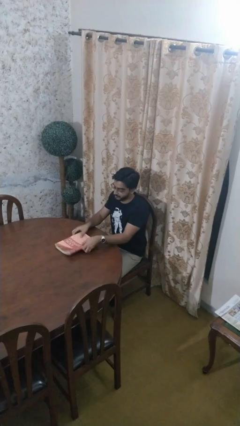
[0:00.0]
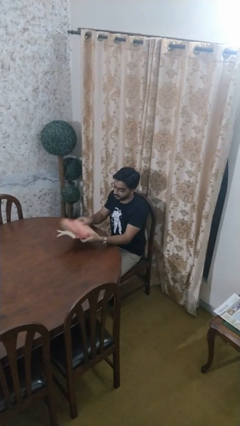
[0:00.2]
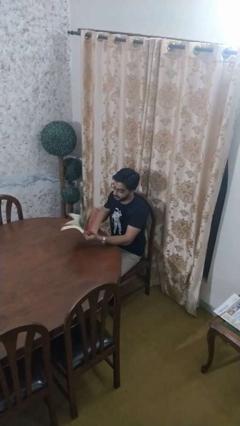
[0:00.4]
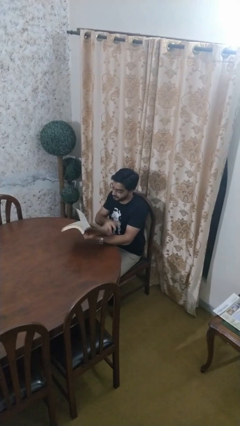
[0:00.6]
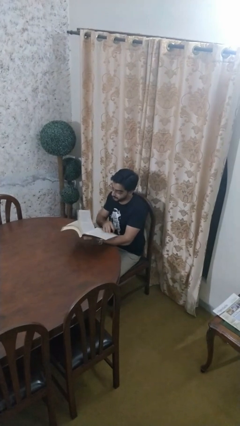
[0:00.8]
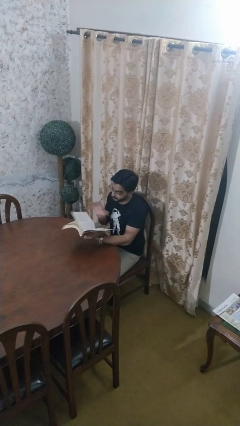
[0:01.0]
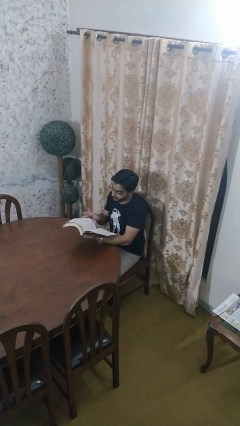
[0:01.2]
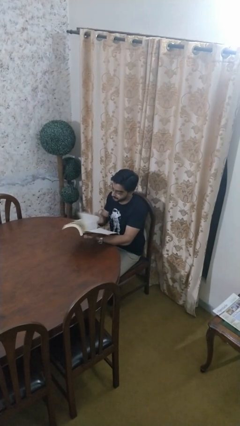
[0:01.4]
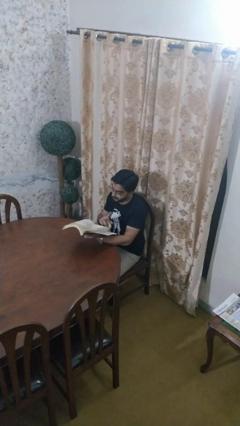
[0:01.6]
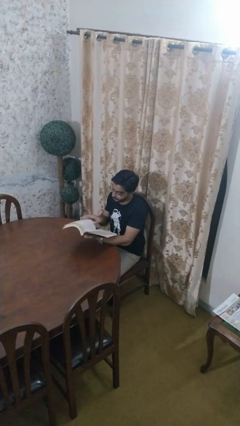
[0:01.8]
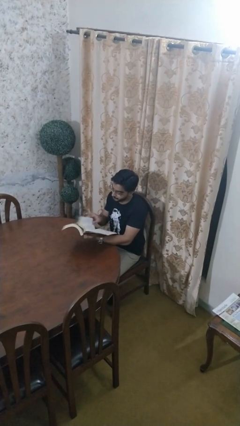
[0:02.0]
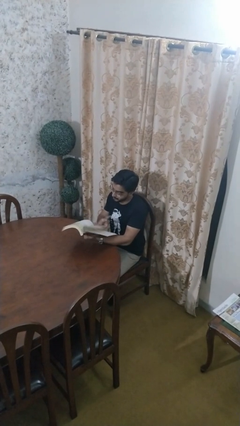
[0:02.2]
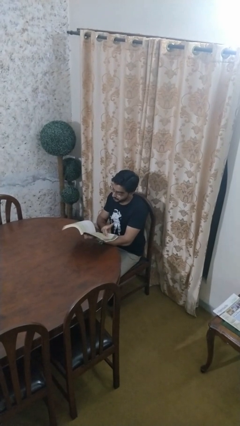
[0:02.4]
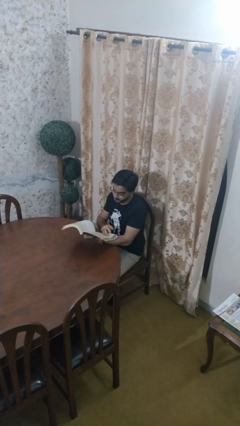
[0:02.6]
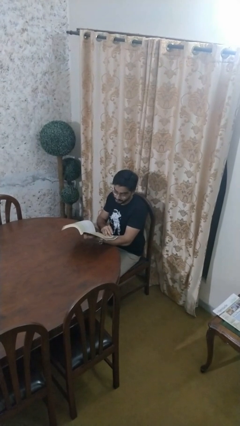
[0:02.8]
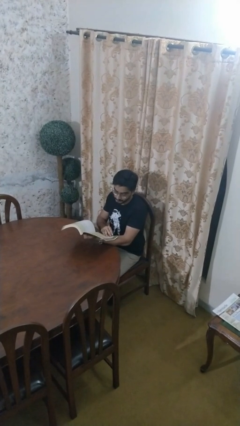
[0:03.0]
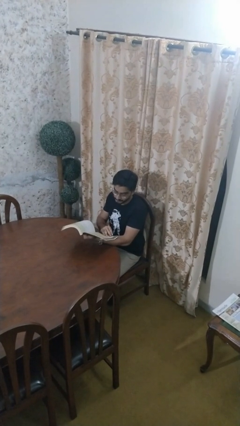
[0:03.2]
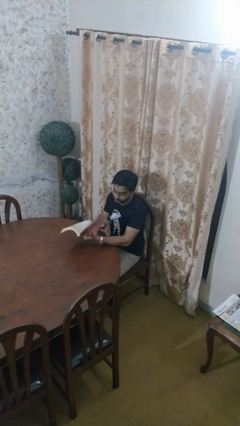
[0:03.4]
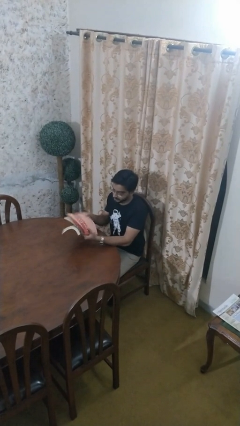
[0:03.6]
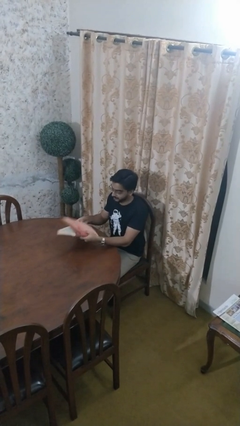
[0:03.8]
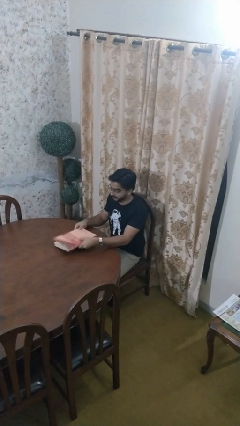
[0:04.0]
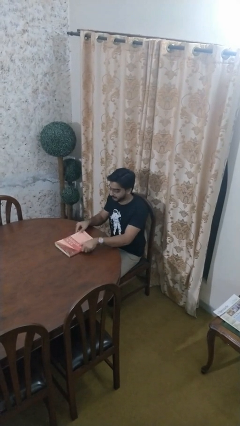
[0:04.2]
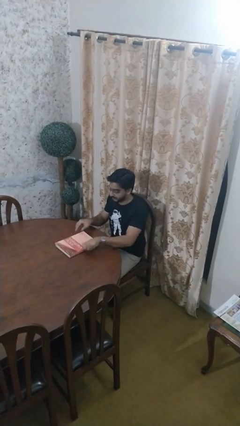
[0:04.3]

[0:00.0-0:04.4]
person reads book

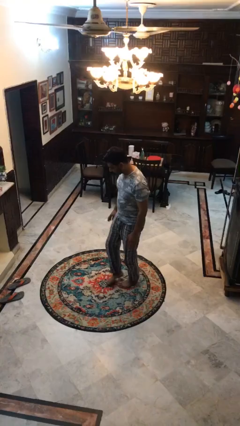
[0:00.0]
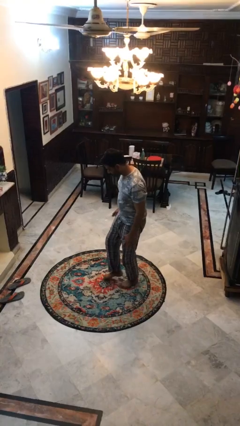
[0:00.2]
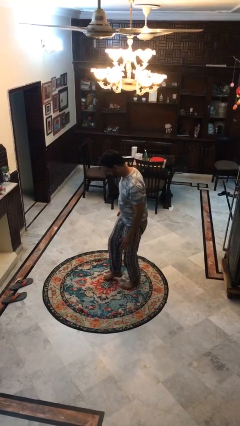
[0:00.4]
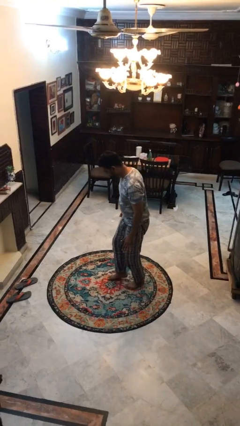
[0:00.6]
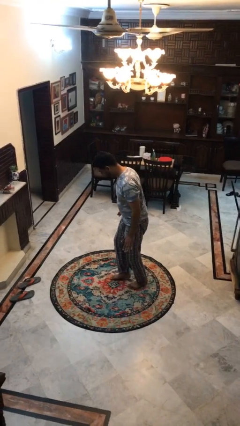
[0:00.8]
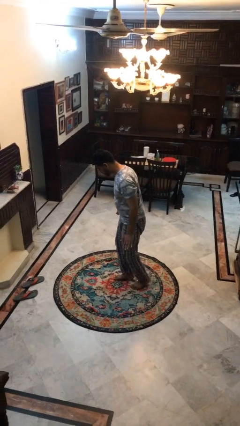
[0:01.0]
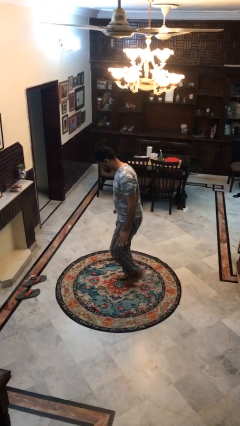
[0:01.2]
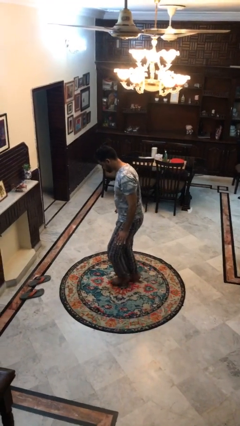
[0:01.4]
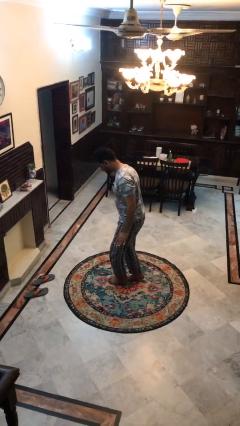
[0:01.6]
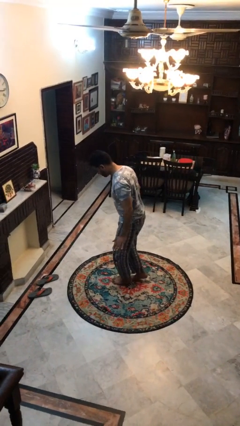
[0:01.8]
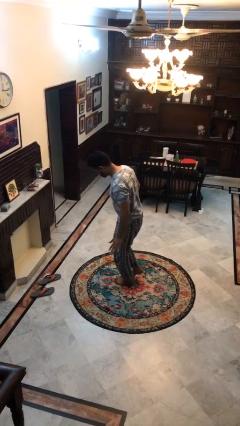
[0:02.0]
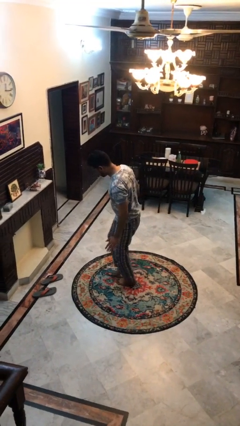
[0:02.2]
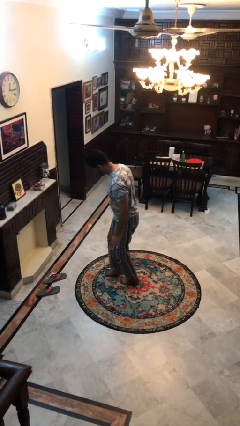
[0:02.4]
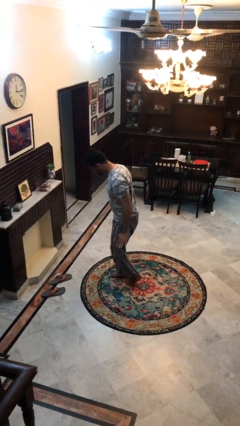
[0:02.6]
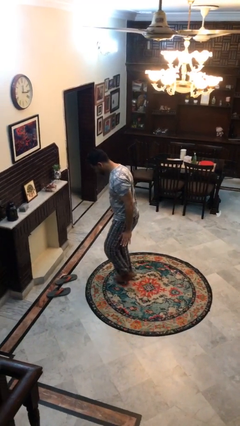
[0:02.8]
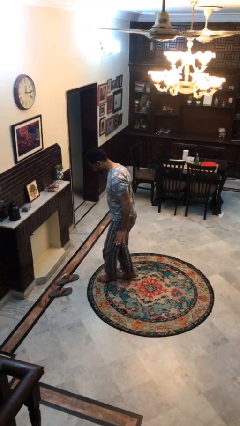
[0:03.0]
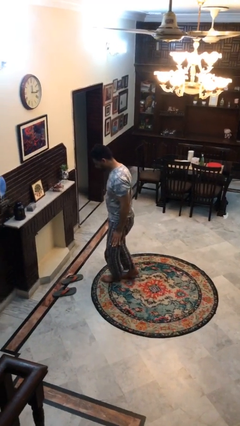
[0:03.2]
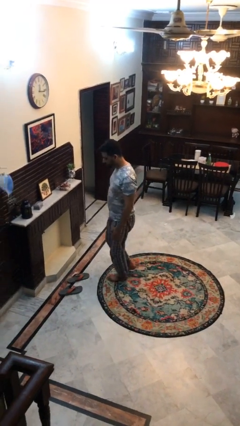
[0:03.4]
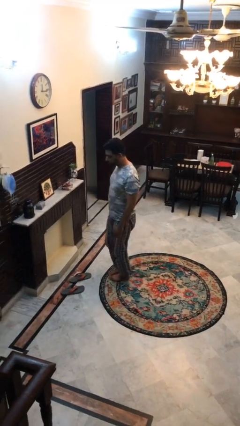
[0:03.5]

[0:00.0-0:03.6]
person walks tiptoe

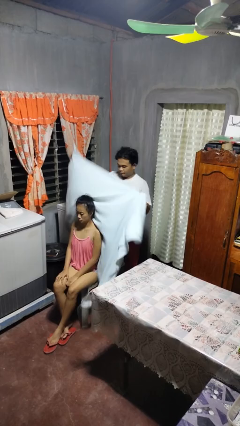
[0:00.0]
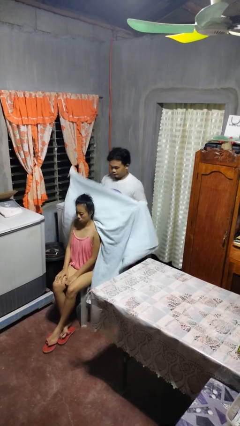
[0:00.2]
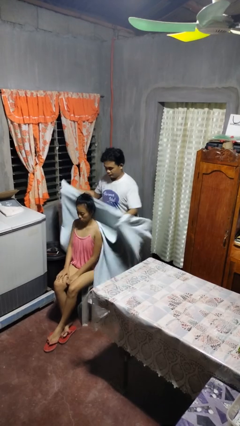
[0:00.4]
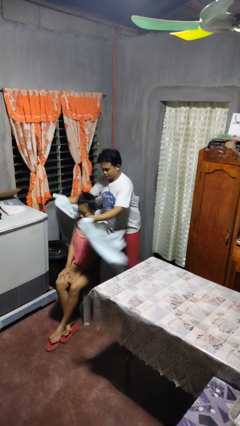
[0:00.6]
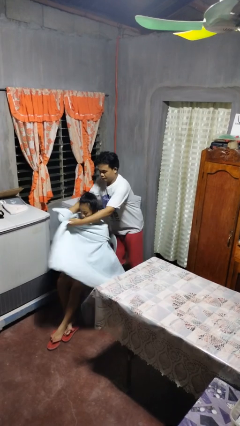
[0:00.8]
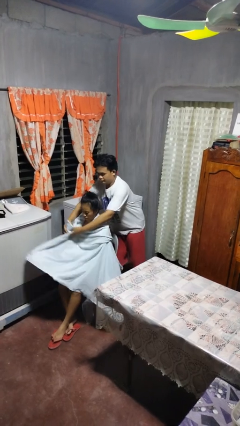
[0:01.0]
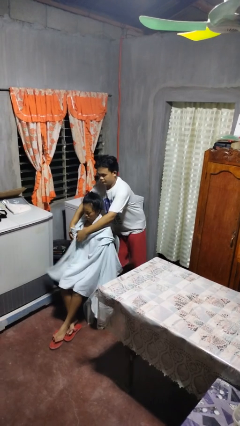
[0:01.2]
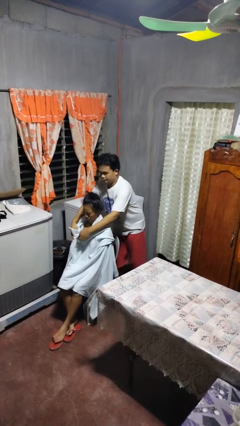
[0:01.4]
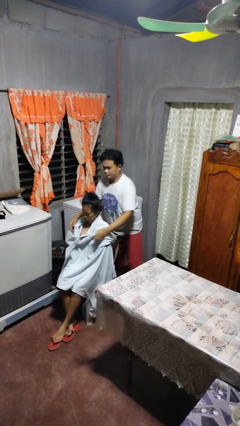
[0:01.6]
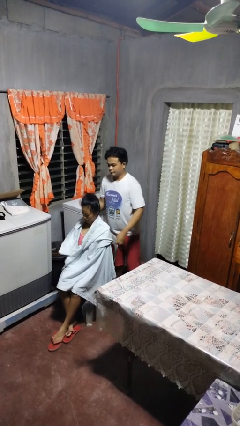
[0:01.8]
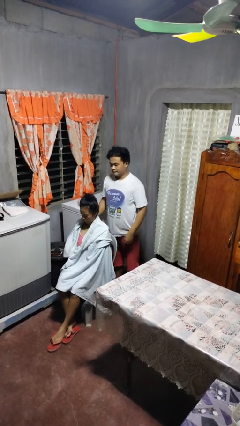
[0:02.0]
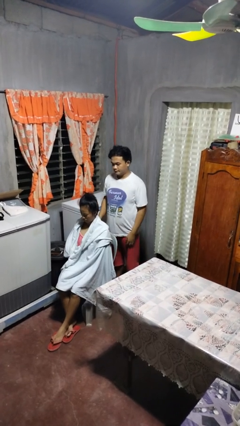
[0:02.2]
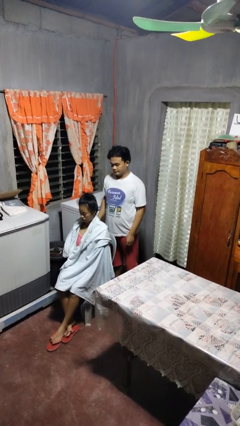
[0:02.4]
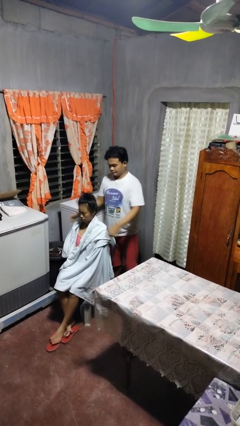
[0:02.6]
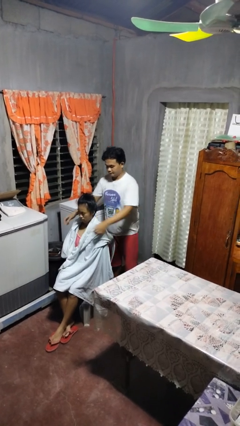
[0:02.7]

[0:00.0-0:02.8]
person covers friend with blanket

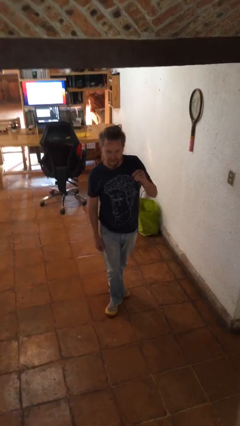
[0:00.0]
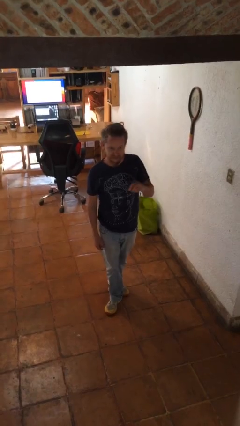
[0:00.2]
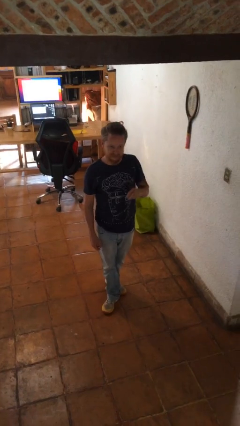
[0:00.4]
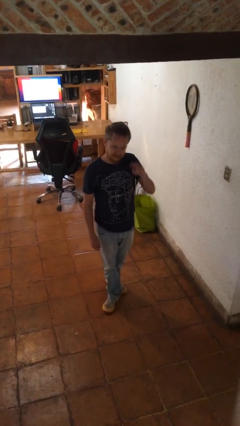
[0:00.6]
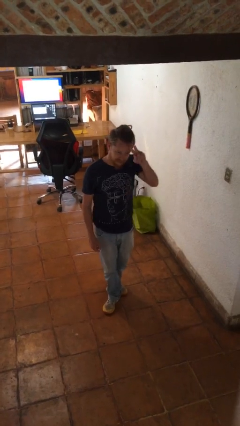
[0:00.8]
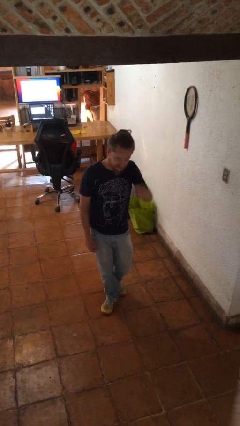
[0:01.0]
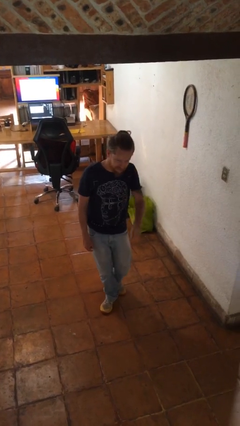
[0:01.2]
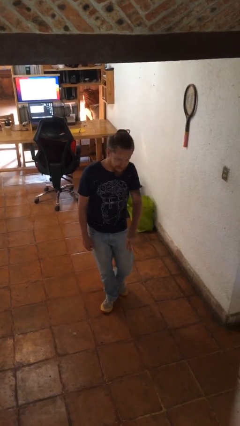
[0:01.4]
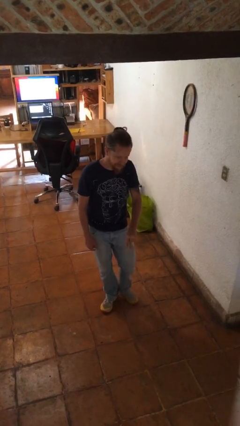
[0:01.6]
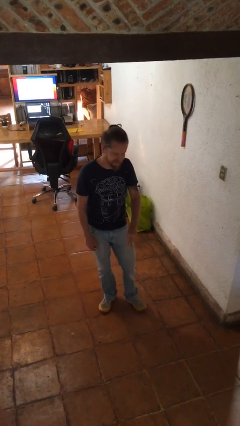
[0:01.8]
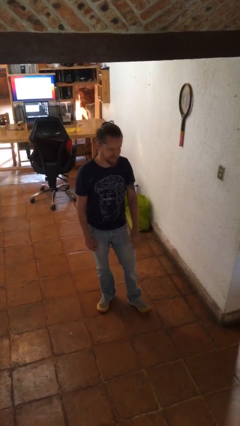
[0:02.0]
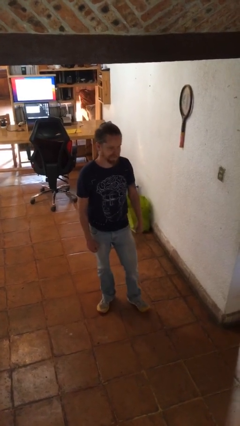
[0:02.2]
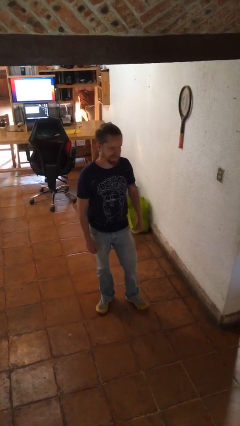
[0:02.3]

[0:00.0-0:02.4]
person gestures swipe down

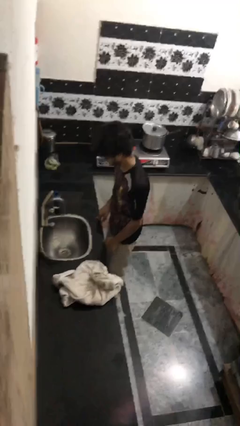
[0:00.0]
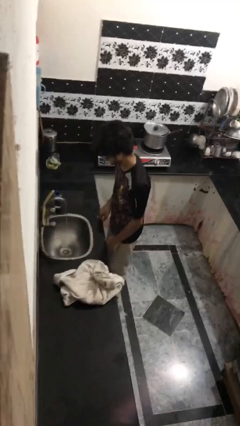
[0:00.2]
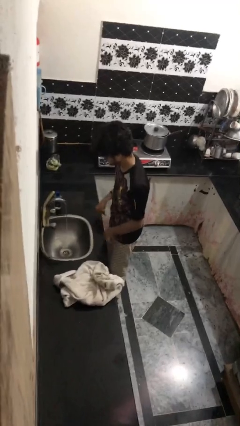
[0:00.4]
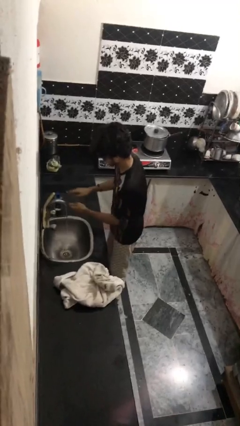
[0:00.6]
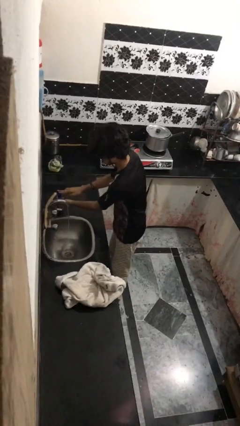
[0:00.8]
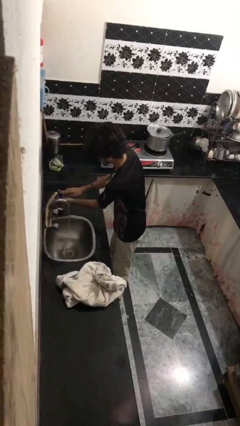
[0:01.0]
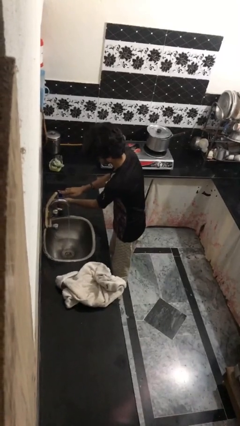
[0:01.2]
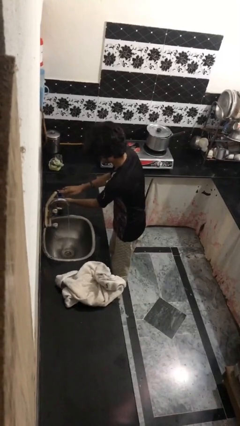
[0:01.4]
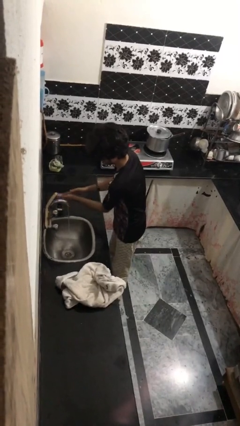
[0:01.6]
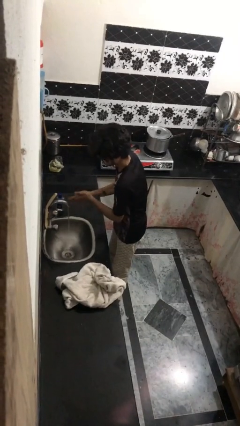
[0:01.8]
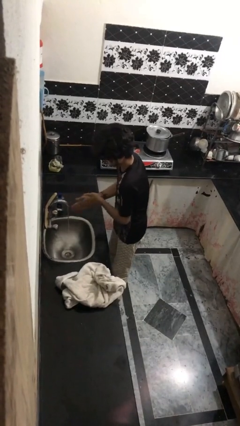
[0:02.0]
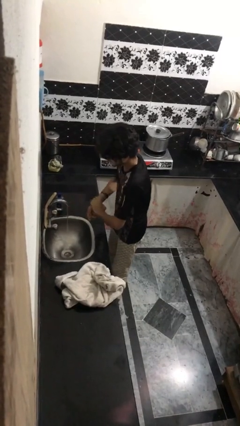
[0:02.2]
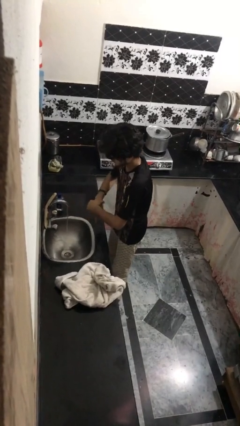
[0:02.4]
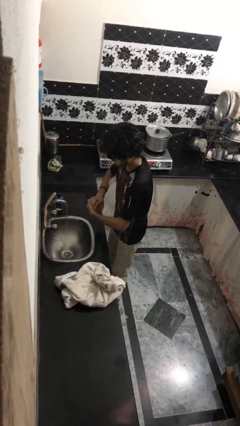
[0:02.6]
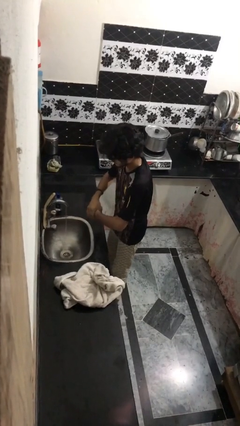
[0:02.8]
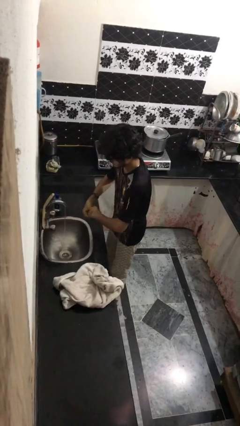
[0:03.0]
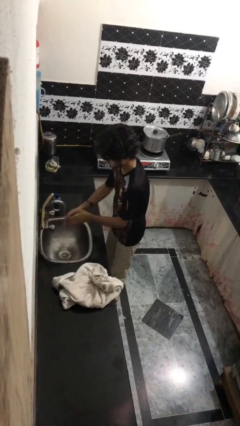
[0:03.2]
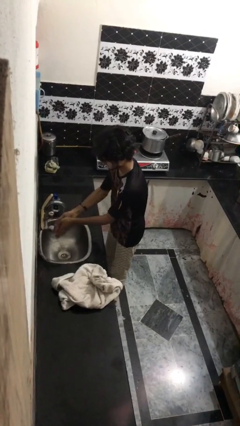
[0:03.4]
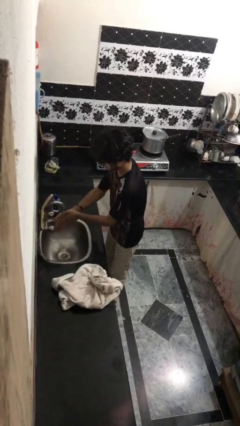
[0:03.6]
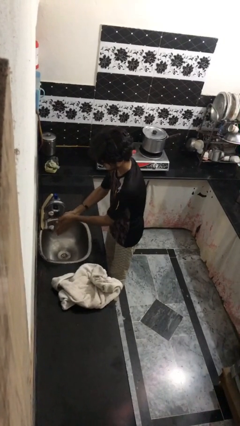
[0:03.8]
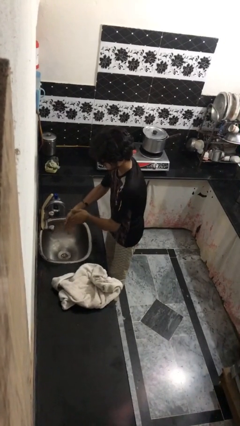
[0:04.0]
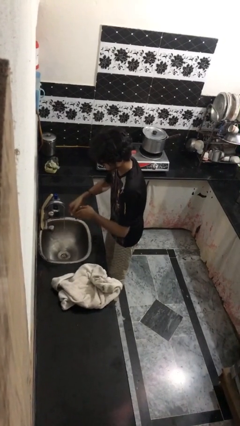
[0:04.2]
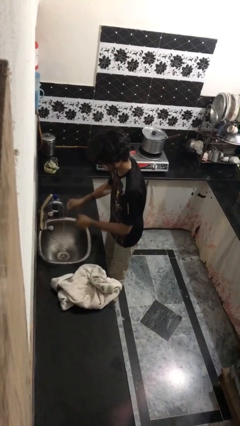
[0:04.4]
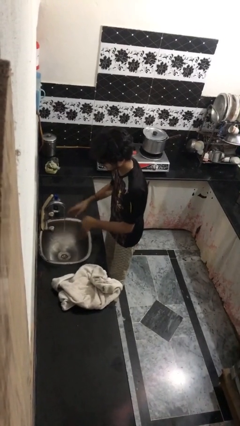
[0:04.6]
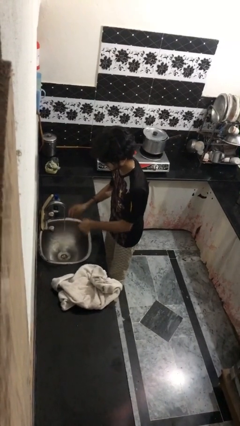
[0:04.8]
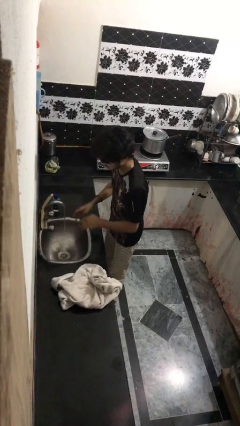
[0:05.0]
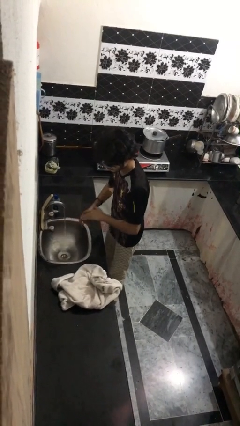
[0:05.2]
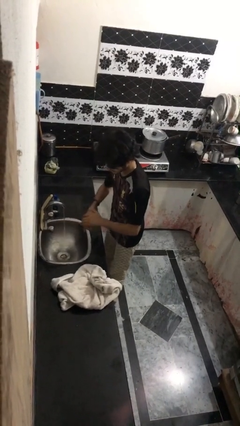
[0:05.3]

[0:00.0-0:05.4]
person washes hands
